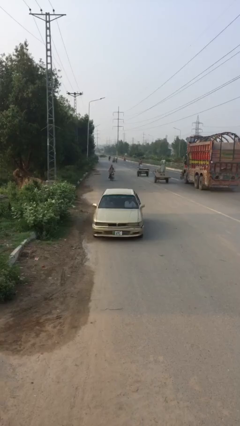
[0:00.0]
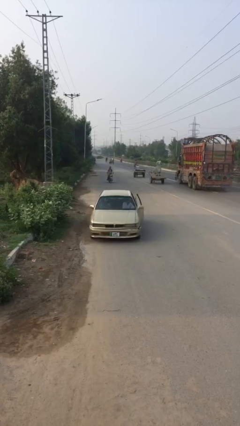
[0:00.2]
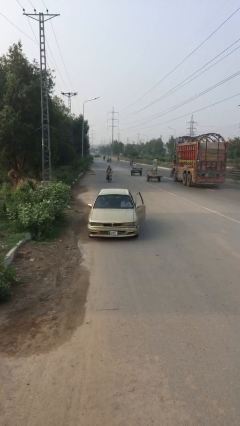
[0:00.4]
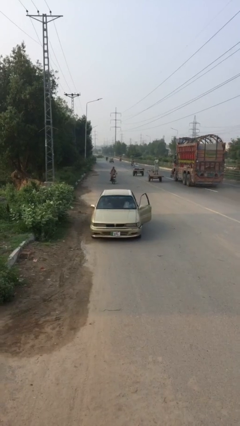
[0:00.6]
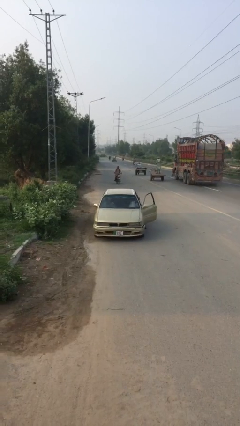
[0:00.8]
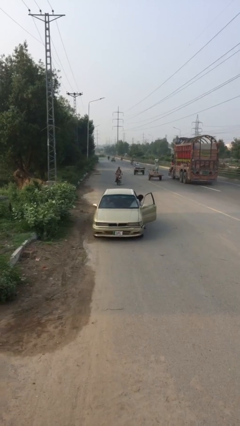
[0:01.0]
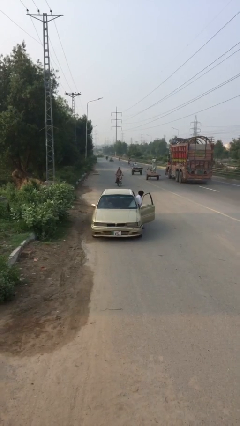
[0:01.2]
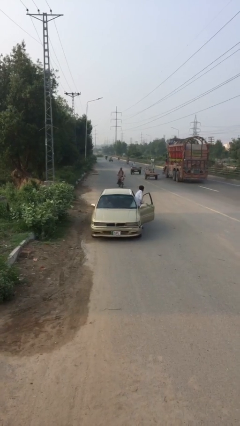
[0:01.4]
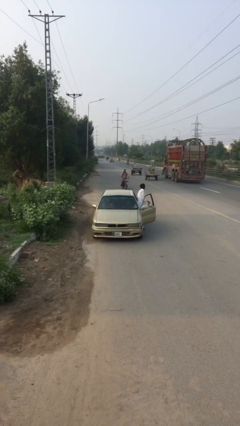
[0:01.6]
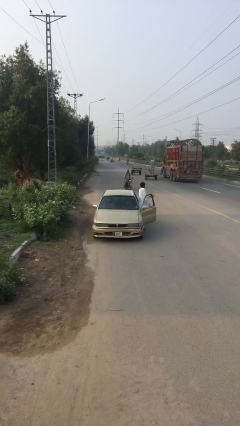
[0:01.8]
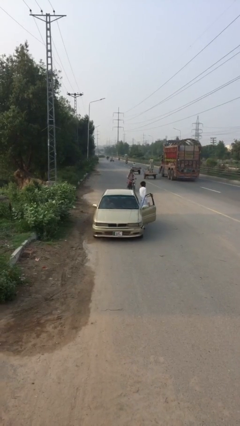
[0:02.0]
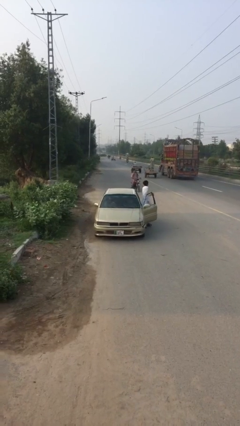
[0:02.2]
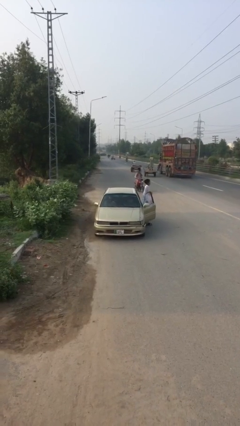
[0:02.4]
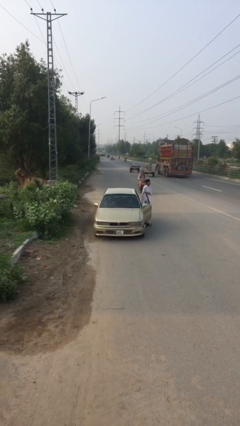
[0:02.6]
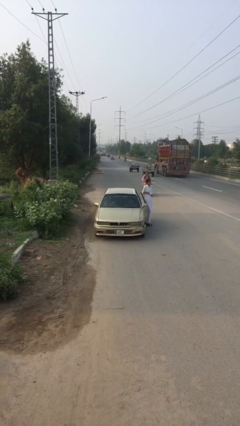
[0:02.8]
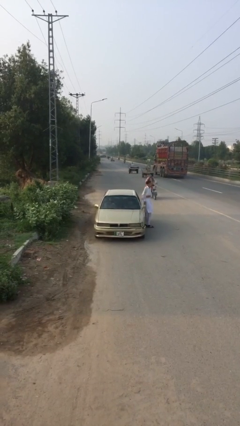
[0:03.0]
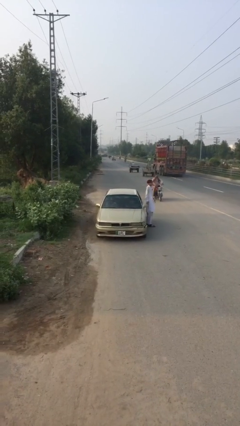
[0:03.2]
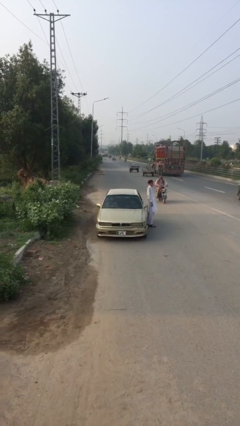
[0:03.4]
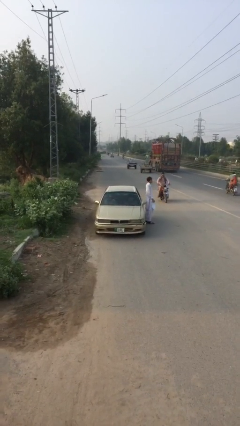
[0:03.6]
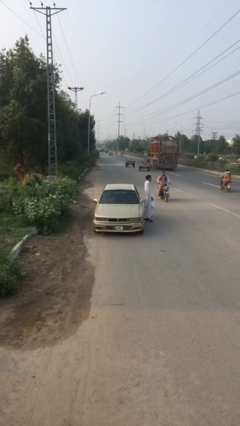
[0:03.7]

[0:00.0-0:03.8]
car drops off person

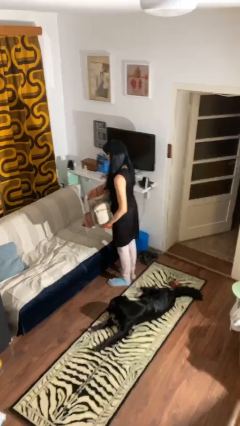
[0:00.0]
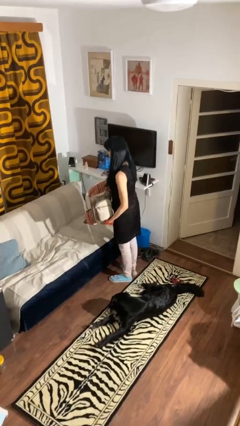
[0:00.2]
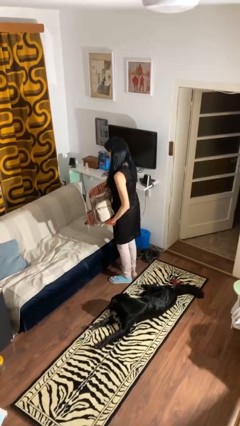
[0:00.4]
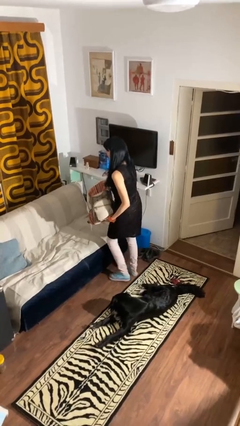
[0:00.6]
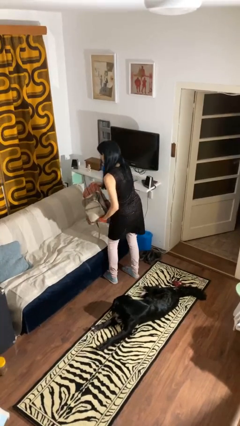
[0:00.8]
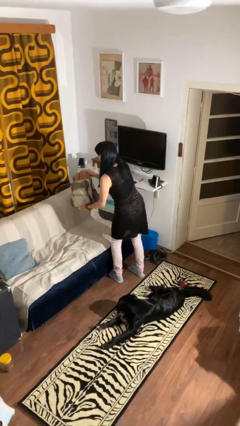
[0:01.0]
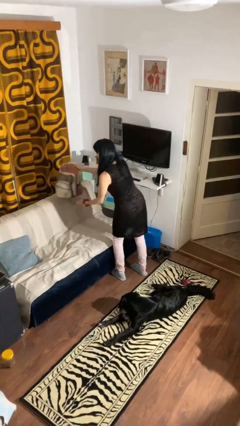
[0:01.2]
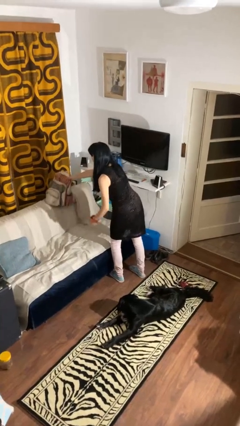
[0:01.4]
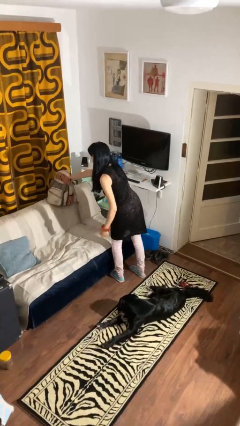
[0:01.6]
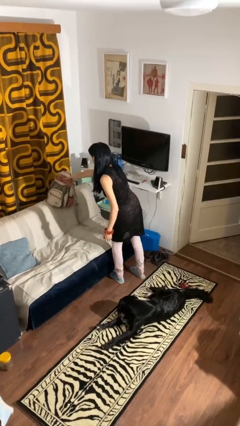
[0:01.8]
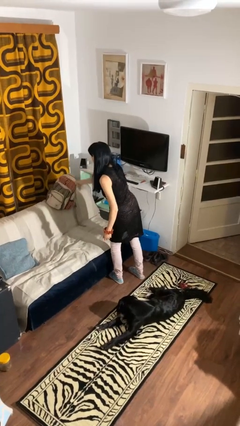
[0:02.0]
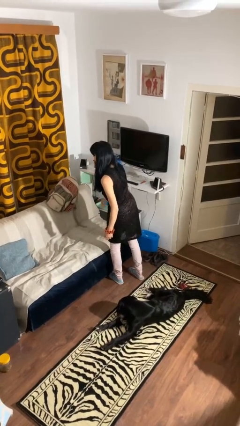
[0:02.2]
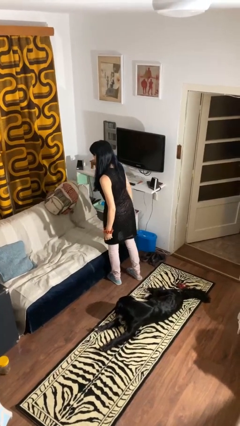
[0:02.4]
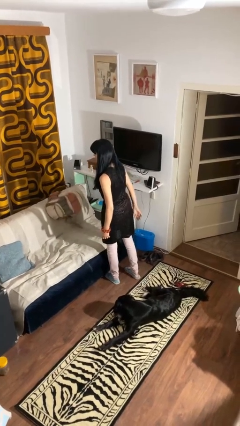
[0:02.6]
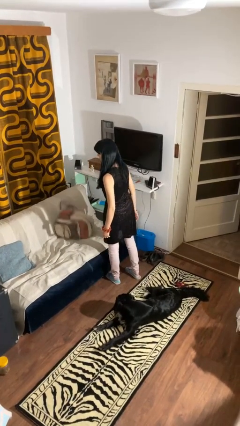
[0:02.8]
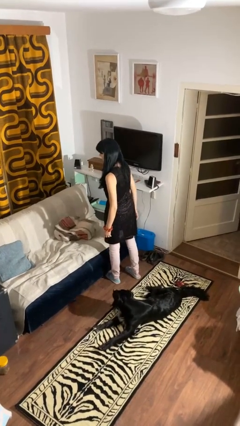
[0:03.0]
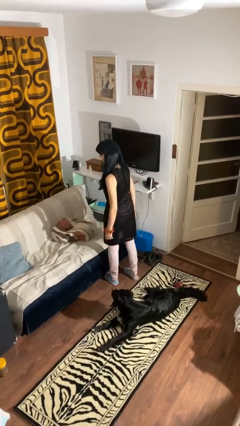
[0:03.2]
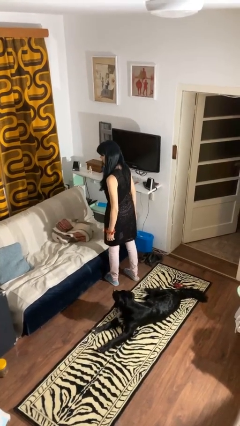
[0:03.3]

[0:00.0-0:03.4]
person puts down object on couch

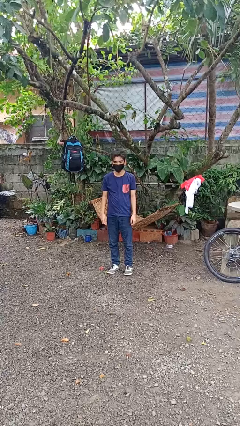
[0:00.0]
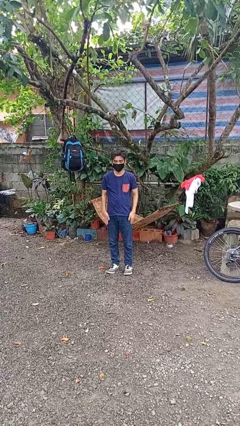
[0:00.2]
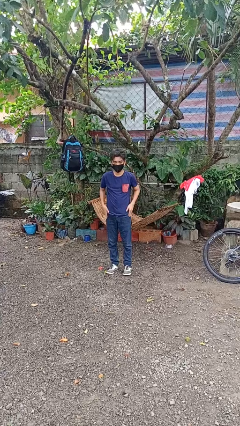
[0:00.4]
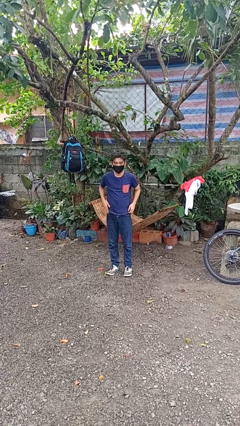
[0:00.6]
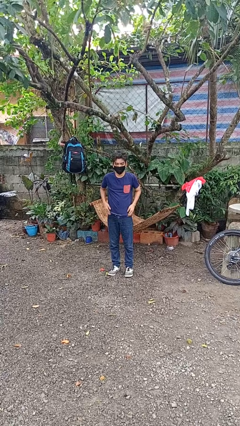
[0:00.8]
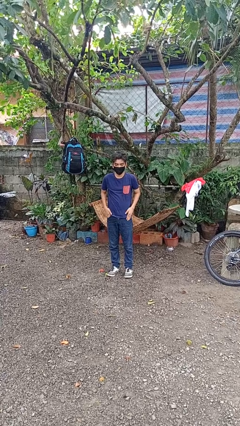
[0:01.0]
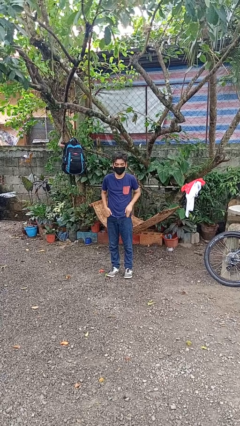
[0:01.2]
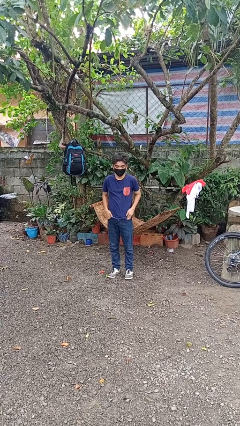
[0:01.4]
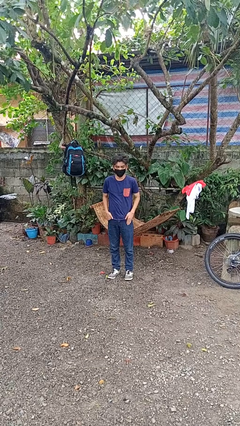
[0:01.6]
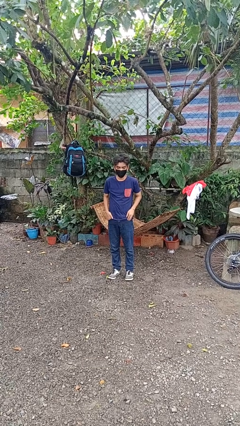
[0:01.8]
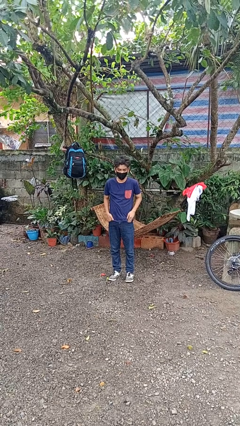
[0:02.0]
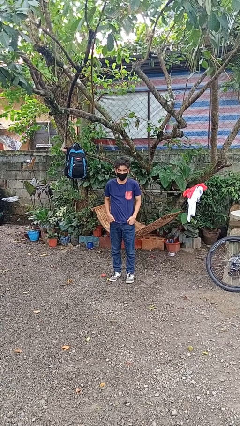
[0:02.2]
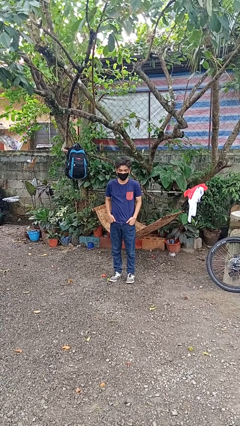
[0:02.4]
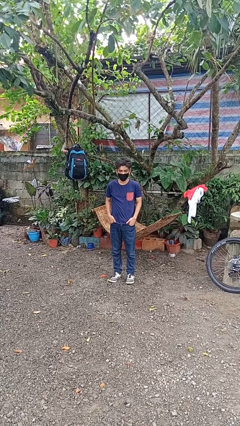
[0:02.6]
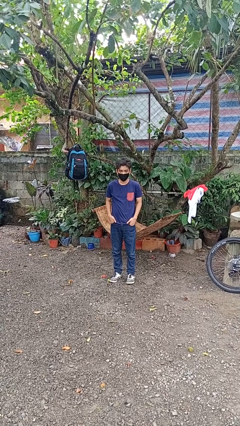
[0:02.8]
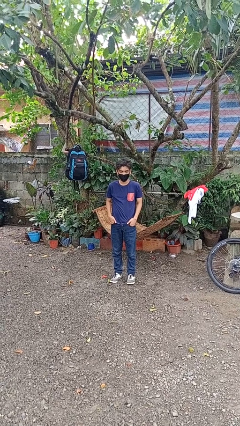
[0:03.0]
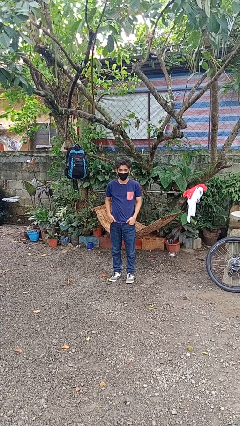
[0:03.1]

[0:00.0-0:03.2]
person puts hands in back pockets

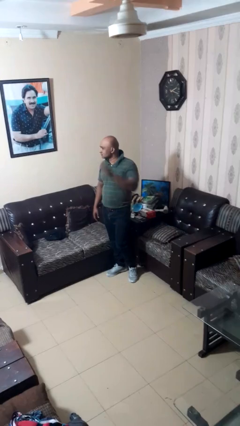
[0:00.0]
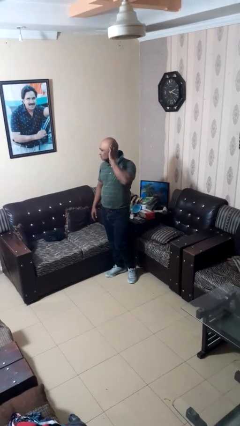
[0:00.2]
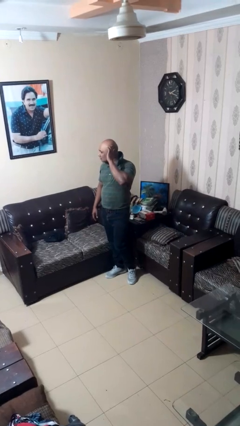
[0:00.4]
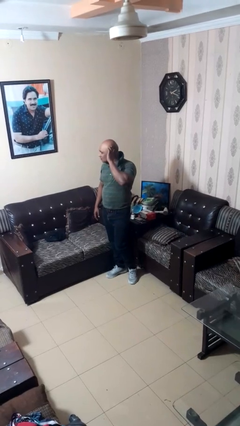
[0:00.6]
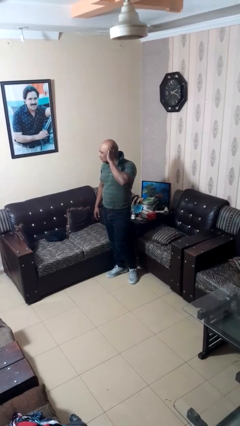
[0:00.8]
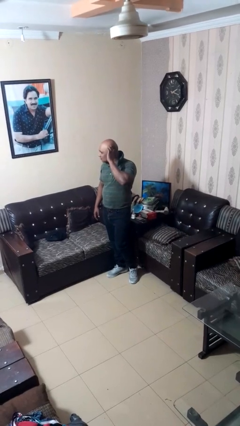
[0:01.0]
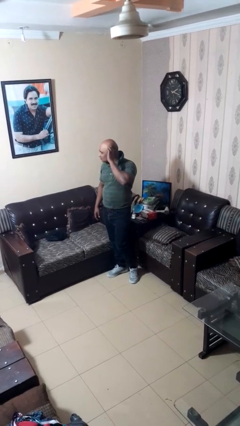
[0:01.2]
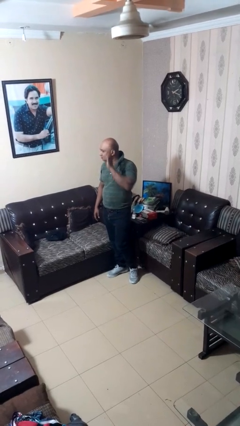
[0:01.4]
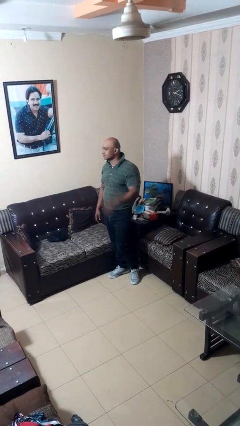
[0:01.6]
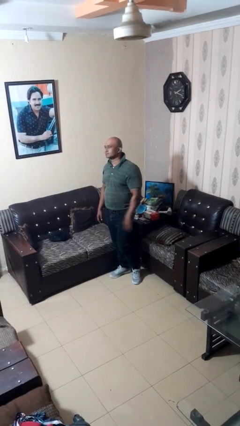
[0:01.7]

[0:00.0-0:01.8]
person gestures listen closely

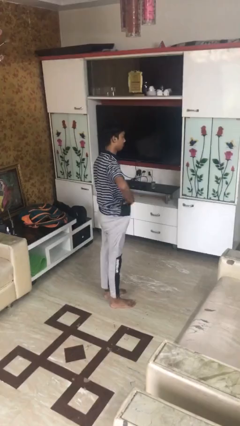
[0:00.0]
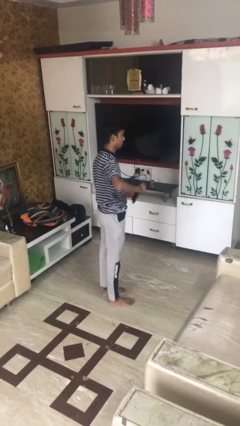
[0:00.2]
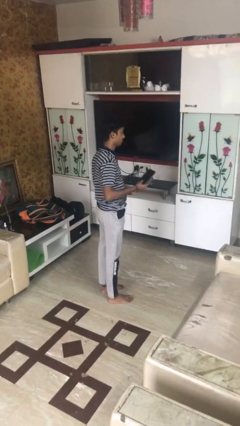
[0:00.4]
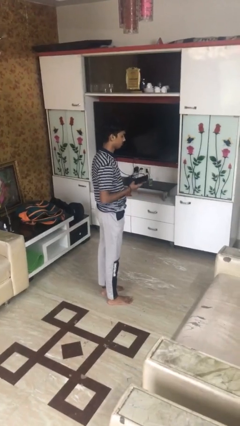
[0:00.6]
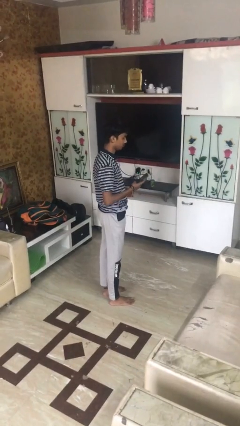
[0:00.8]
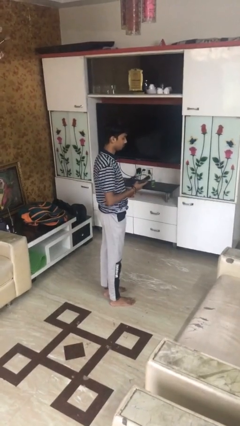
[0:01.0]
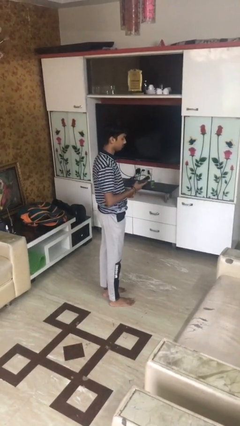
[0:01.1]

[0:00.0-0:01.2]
person takes phone from pocket

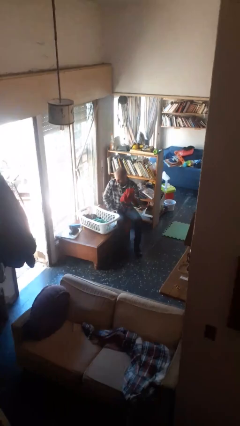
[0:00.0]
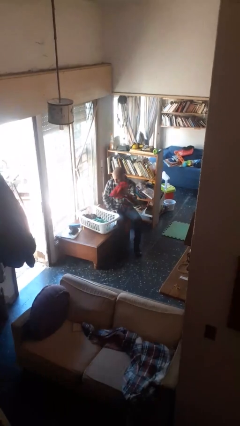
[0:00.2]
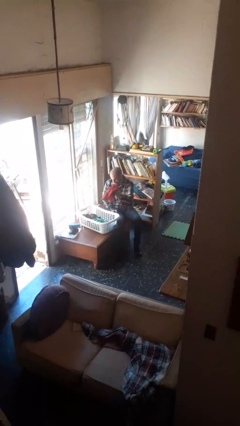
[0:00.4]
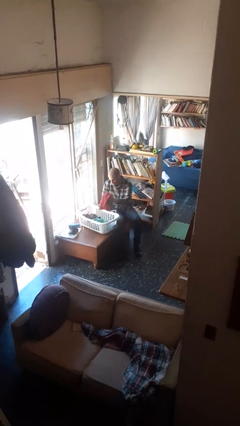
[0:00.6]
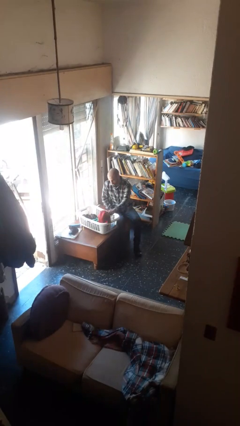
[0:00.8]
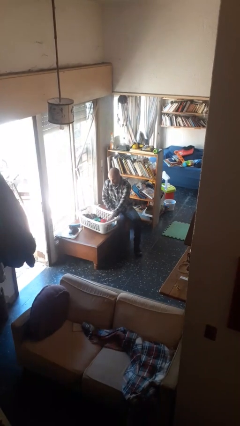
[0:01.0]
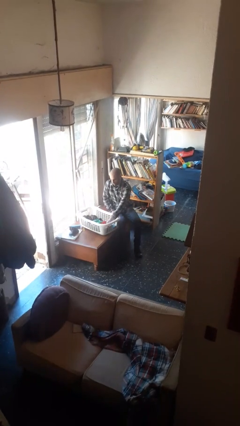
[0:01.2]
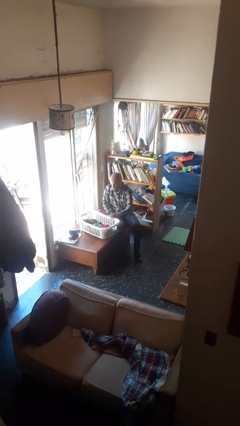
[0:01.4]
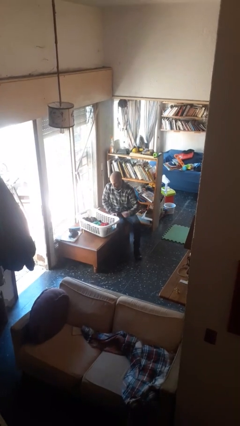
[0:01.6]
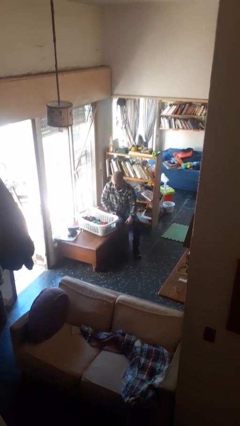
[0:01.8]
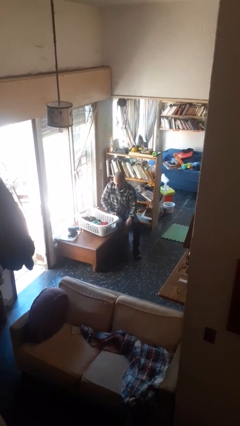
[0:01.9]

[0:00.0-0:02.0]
person puts object into basket

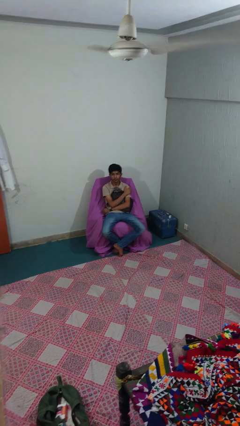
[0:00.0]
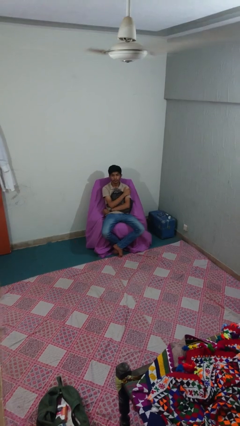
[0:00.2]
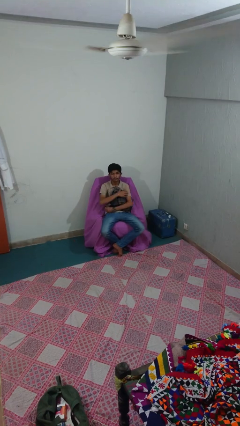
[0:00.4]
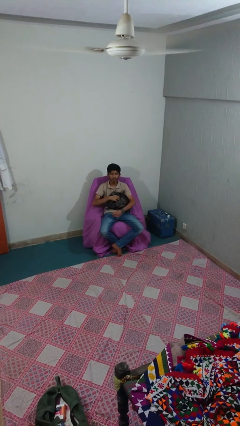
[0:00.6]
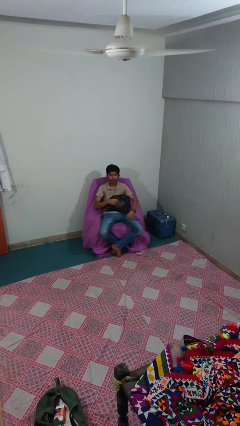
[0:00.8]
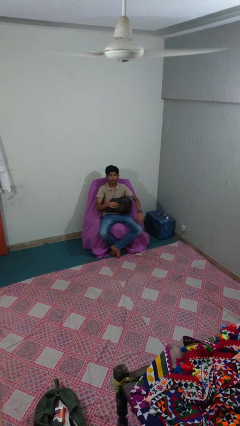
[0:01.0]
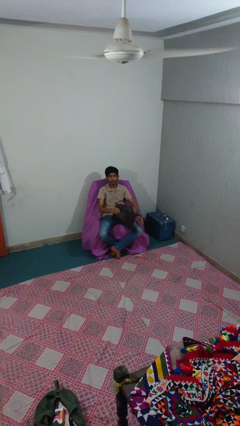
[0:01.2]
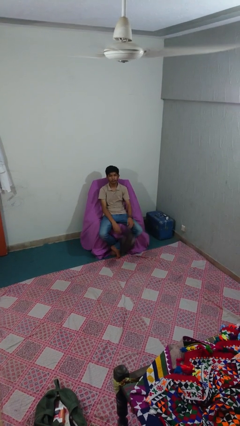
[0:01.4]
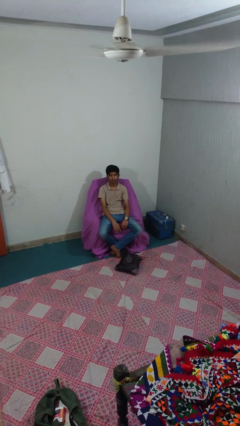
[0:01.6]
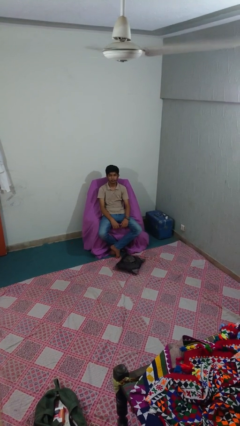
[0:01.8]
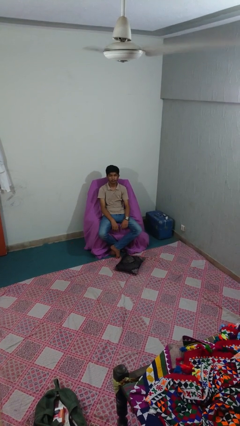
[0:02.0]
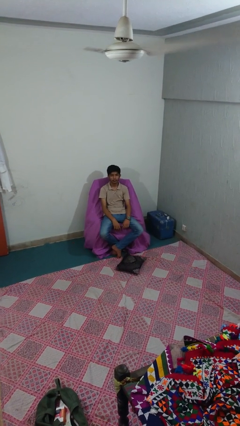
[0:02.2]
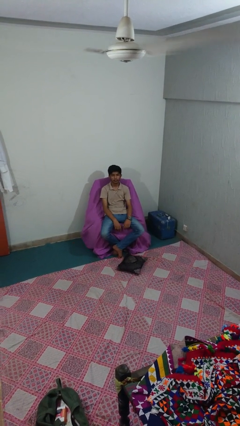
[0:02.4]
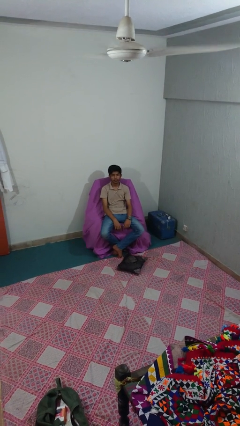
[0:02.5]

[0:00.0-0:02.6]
person drops object
